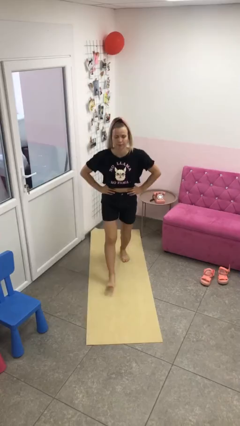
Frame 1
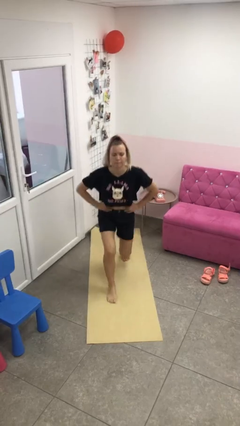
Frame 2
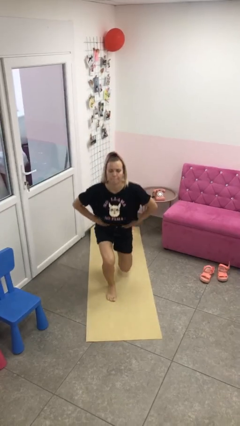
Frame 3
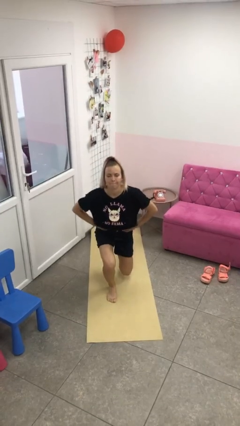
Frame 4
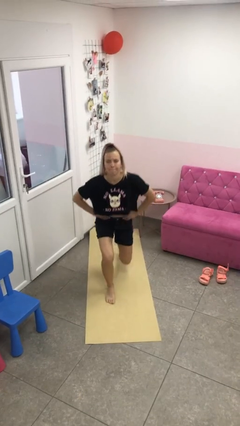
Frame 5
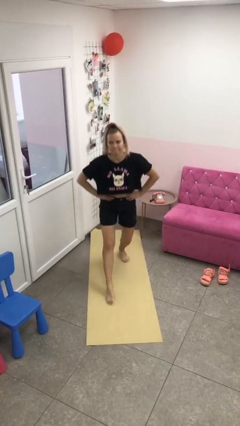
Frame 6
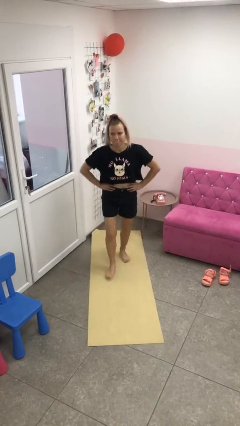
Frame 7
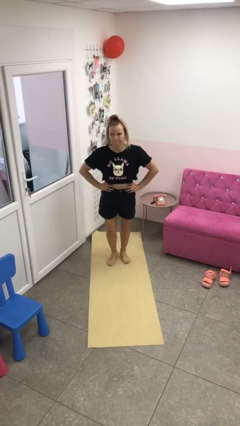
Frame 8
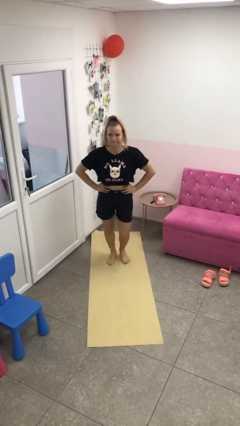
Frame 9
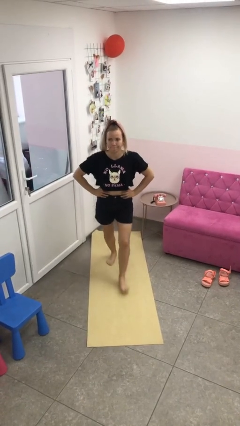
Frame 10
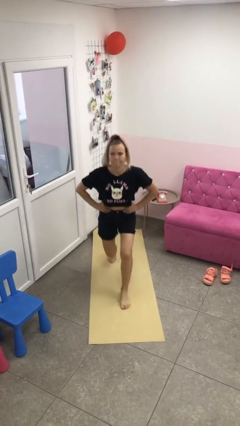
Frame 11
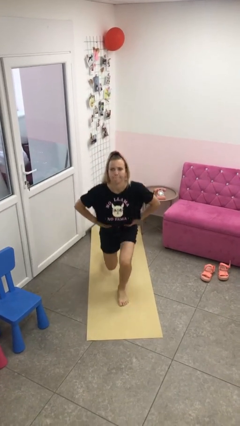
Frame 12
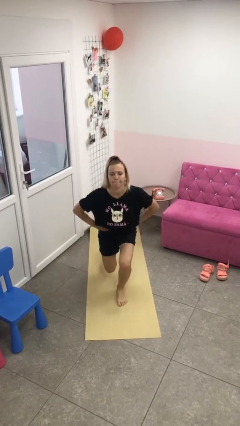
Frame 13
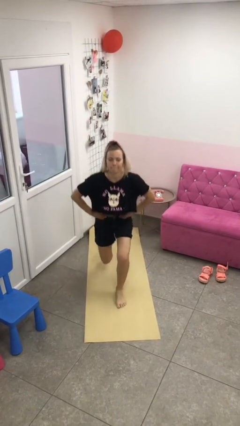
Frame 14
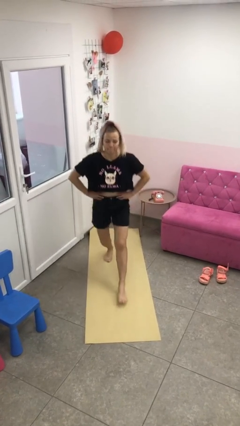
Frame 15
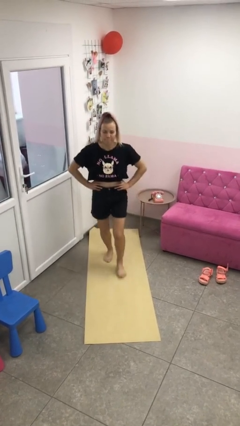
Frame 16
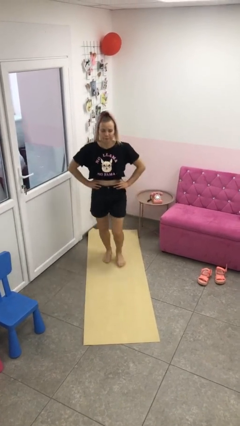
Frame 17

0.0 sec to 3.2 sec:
person exercises with lunges

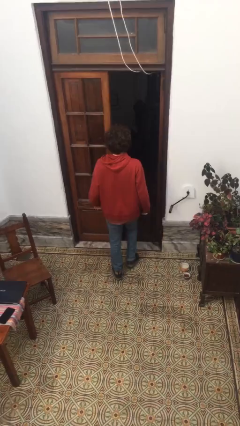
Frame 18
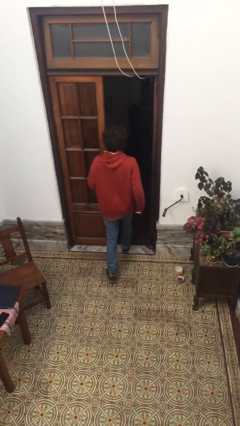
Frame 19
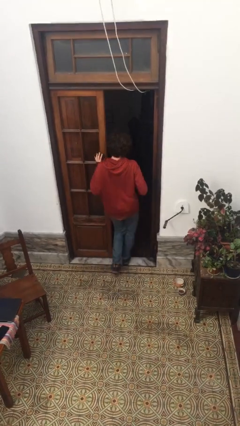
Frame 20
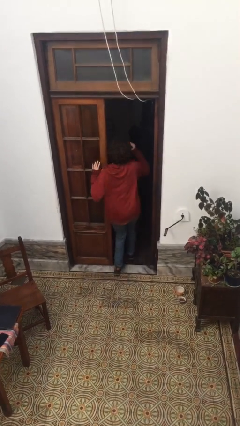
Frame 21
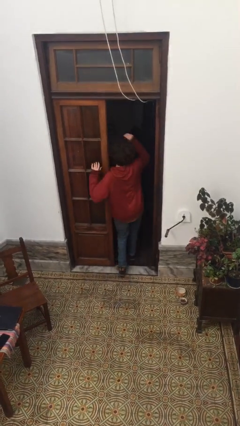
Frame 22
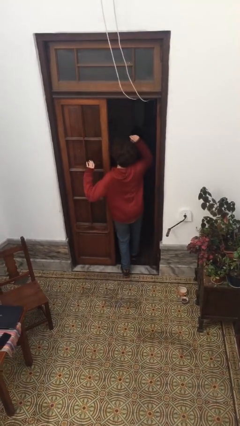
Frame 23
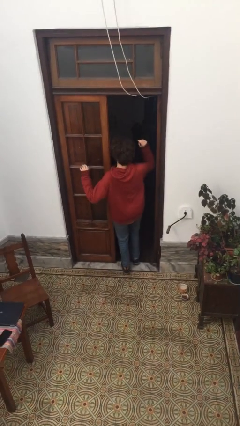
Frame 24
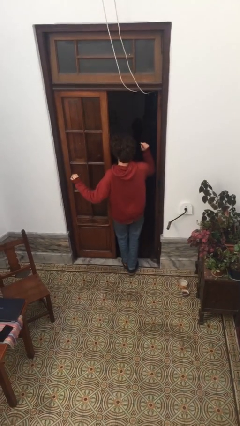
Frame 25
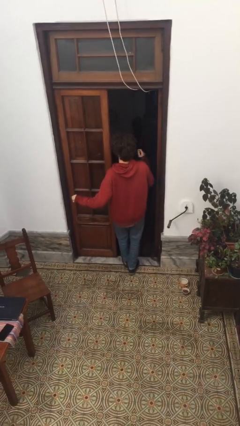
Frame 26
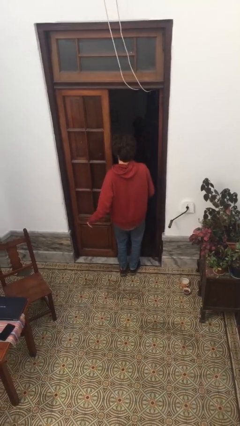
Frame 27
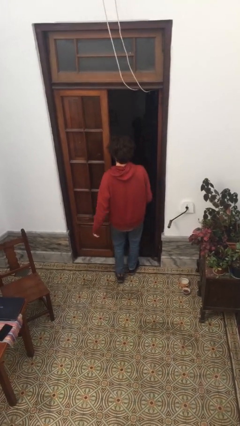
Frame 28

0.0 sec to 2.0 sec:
person bumps into wall

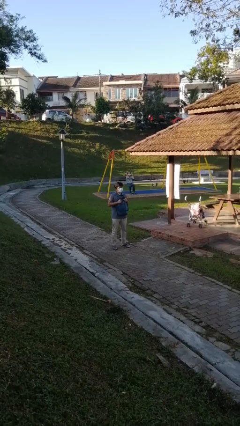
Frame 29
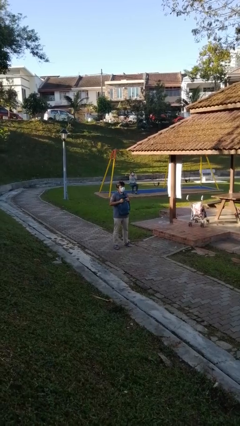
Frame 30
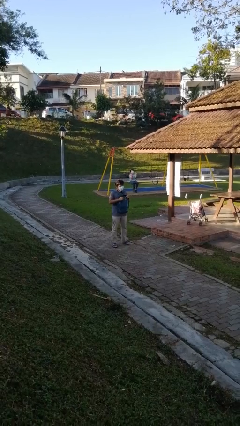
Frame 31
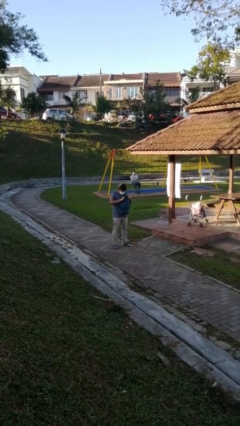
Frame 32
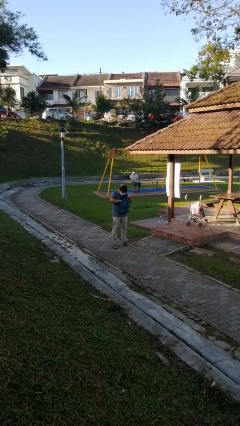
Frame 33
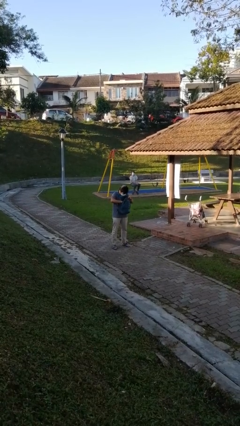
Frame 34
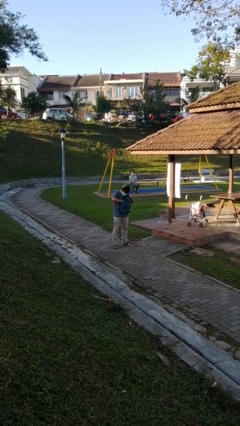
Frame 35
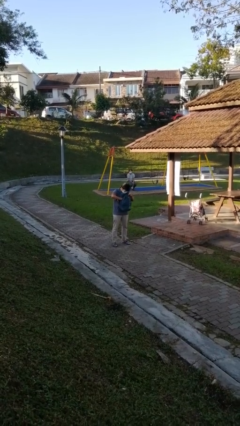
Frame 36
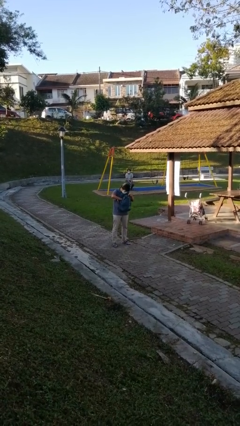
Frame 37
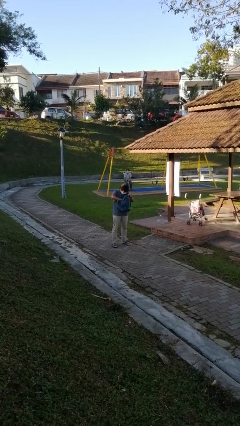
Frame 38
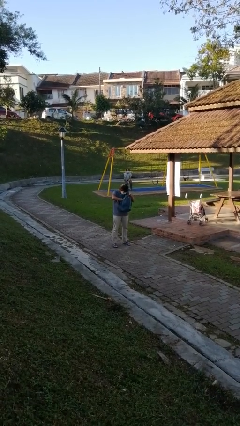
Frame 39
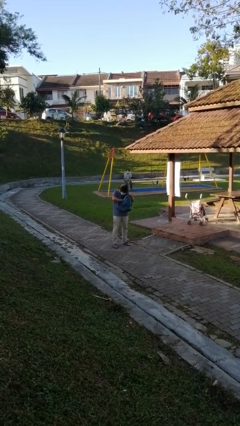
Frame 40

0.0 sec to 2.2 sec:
person searches in backpack

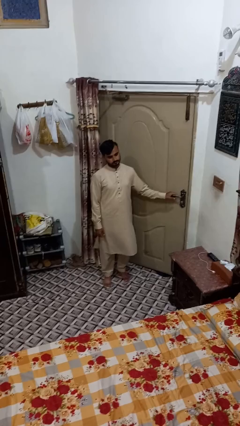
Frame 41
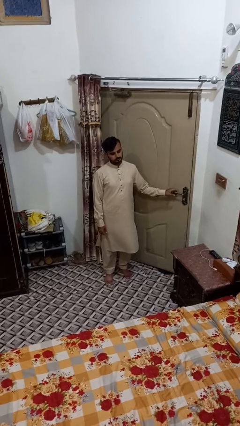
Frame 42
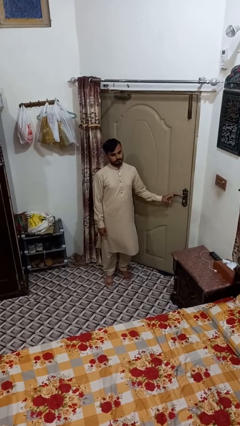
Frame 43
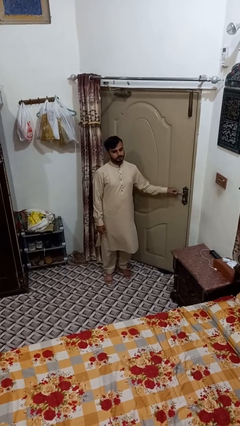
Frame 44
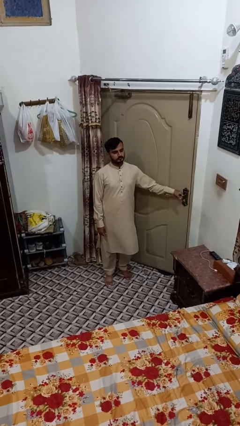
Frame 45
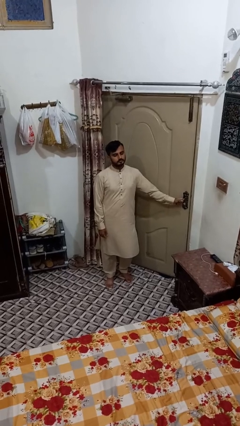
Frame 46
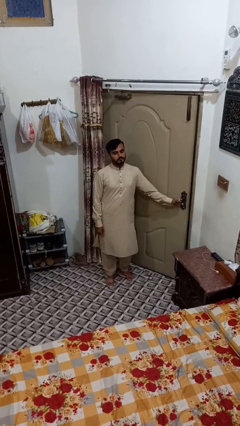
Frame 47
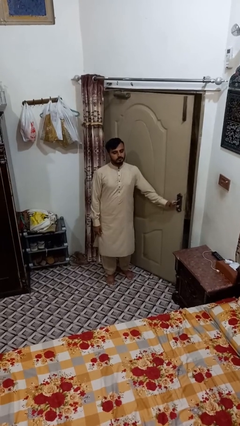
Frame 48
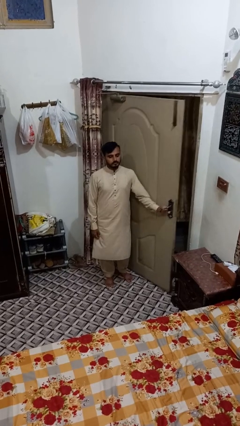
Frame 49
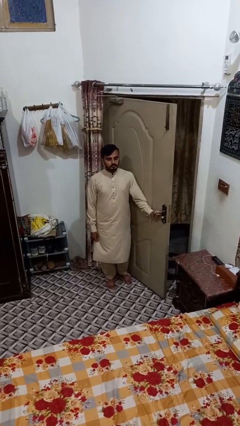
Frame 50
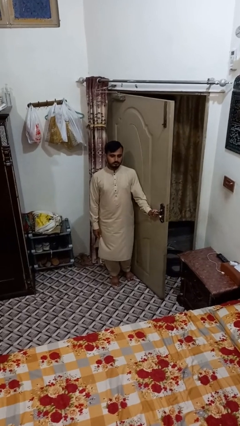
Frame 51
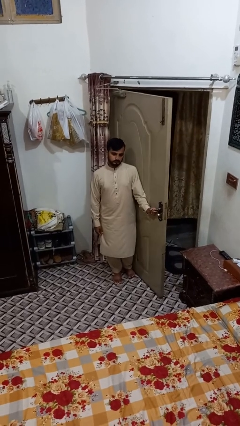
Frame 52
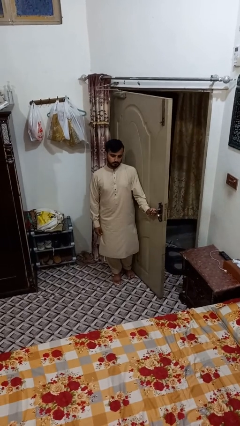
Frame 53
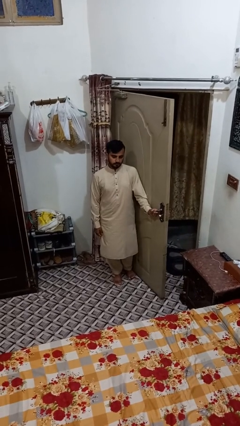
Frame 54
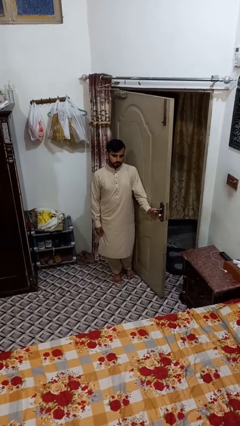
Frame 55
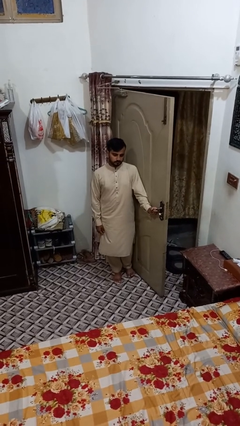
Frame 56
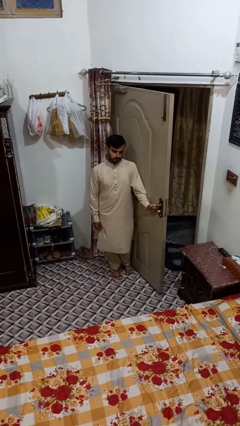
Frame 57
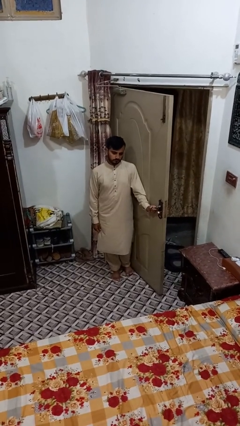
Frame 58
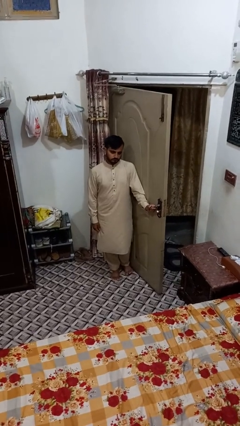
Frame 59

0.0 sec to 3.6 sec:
person opens closet door

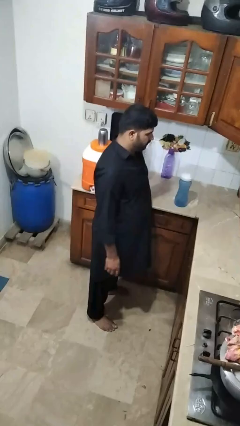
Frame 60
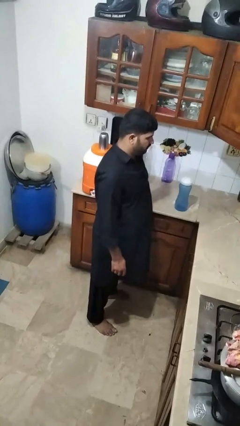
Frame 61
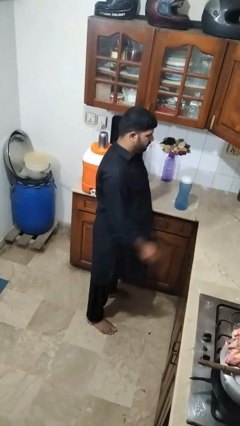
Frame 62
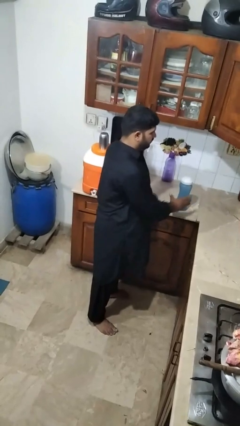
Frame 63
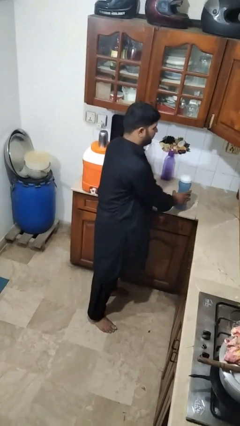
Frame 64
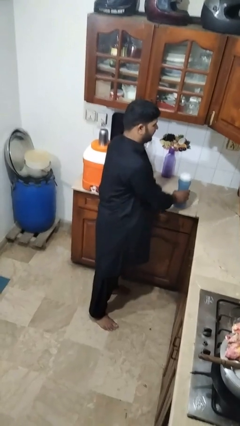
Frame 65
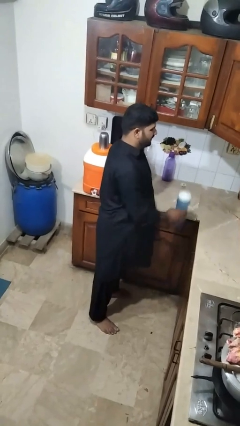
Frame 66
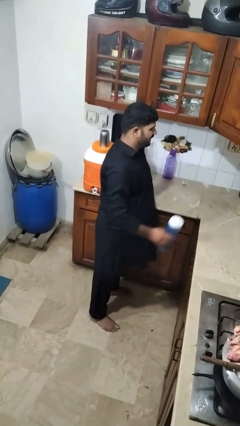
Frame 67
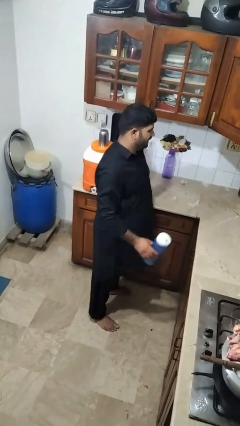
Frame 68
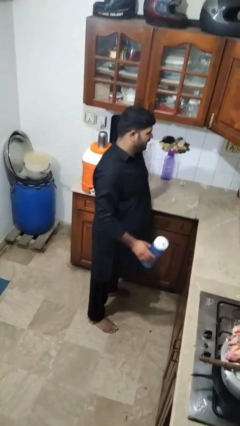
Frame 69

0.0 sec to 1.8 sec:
person picks up object from countertop

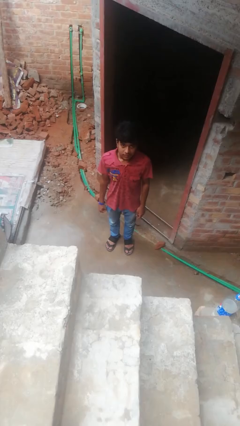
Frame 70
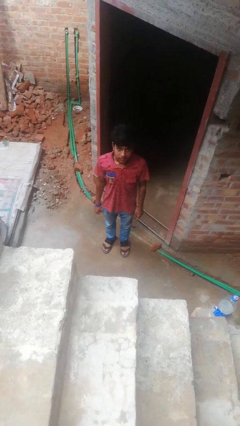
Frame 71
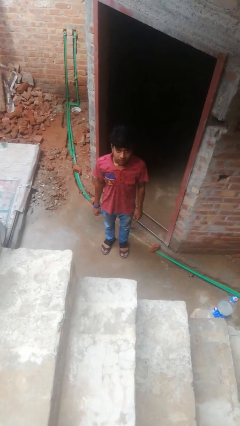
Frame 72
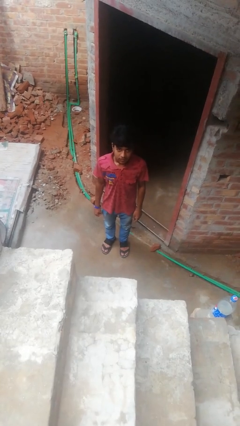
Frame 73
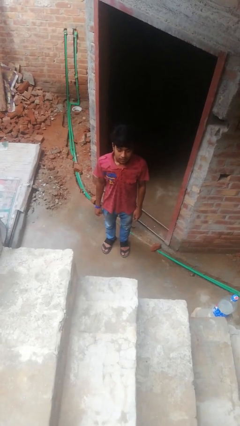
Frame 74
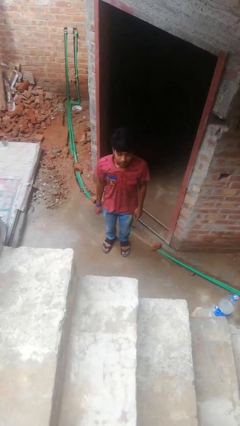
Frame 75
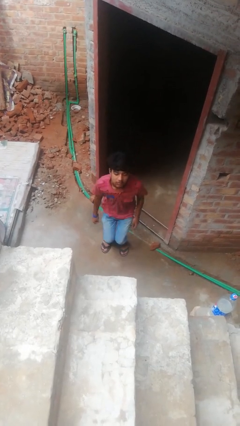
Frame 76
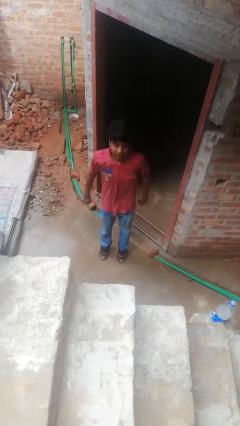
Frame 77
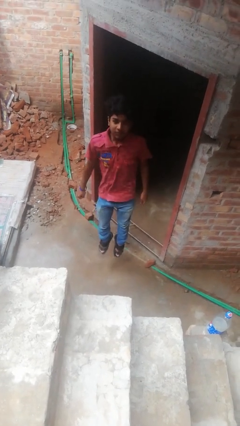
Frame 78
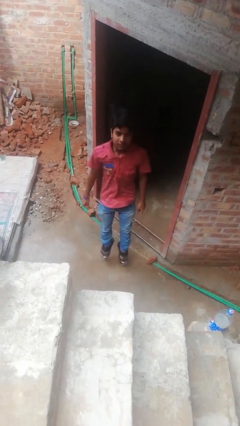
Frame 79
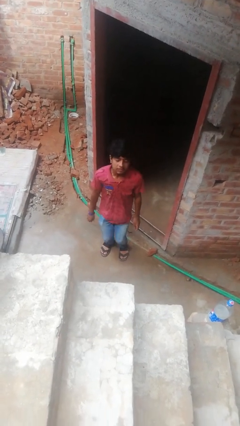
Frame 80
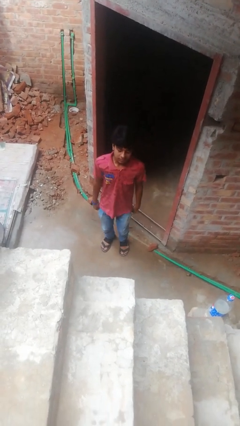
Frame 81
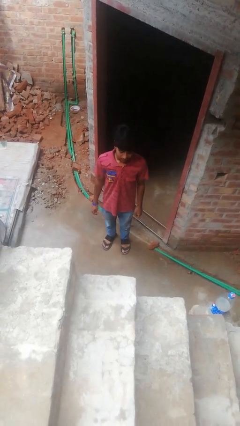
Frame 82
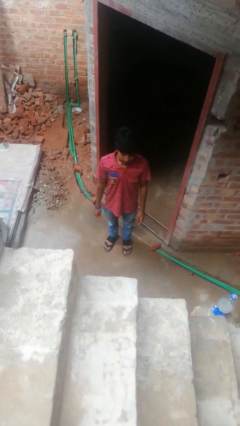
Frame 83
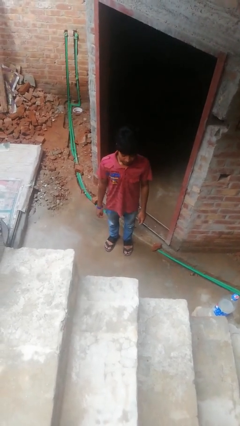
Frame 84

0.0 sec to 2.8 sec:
person jumps

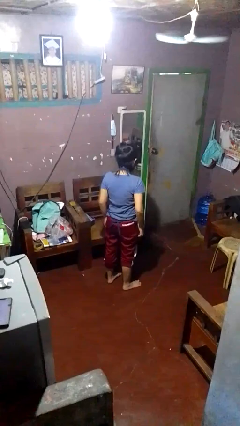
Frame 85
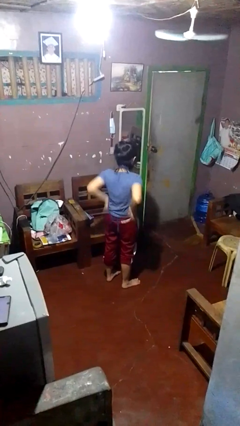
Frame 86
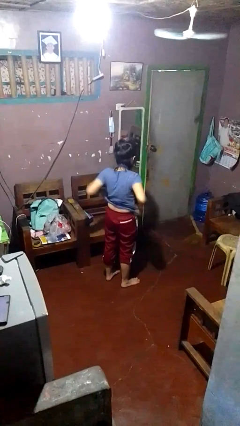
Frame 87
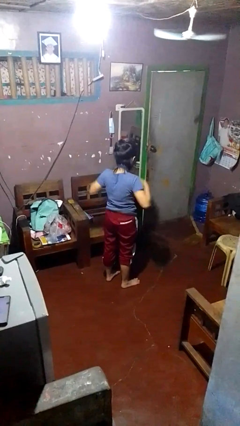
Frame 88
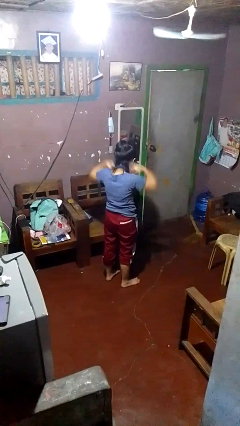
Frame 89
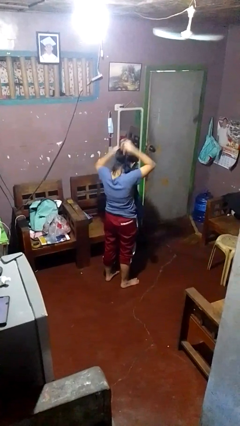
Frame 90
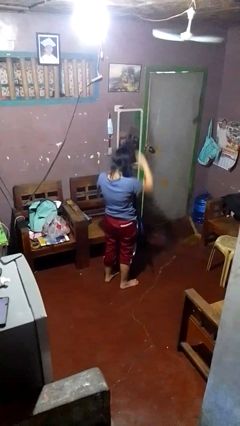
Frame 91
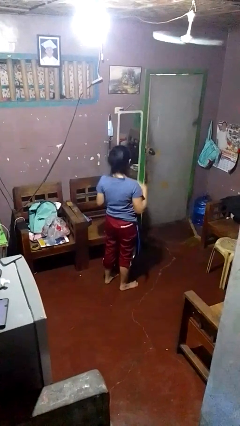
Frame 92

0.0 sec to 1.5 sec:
person takes off apron
